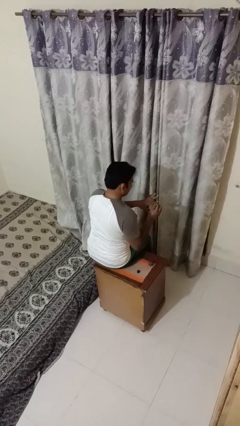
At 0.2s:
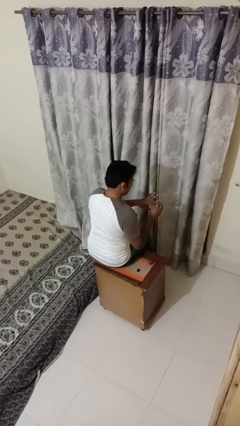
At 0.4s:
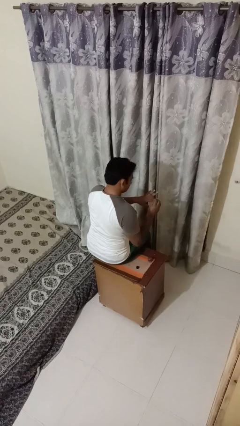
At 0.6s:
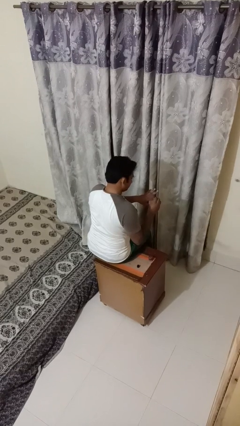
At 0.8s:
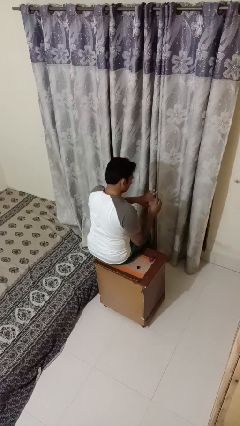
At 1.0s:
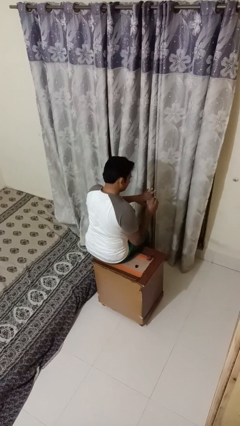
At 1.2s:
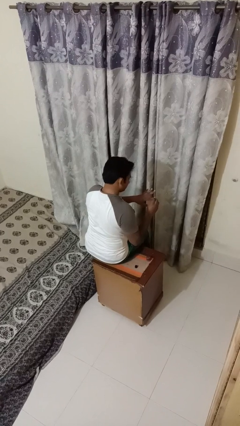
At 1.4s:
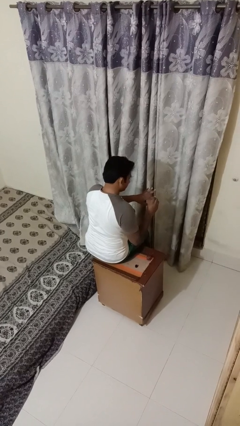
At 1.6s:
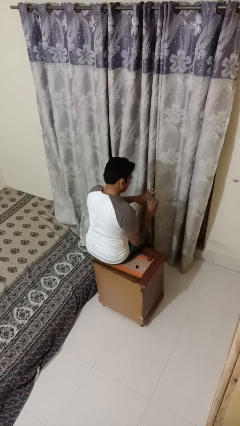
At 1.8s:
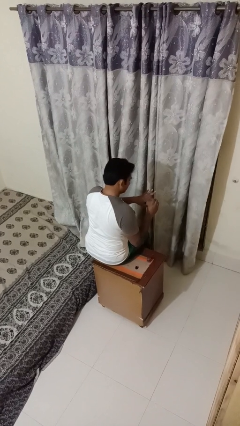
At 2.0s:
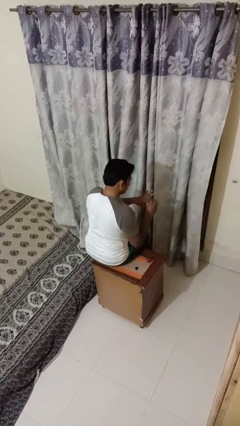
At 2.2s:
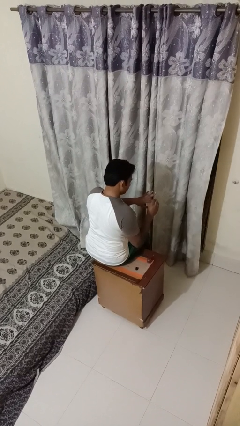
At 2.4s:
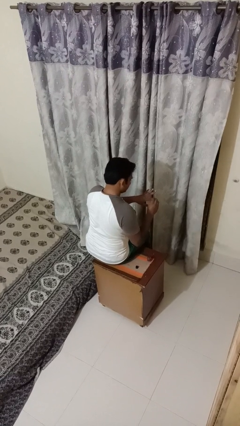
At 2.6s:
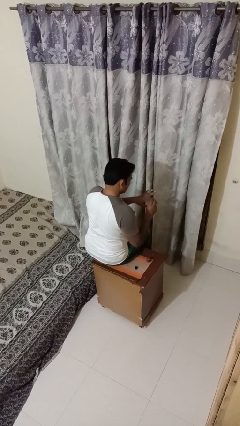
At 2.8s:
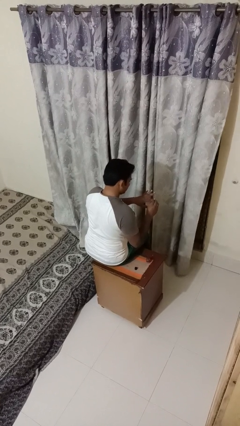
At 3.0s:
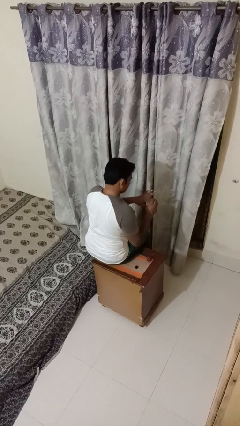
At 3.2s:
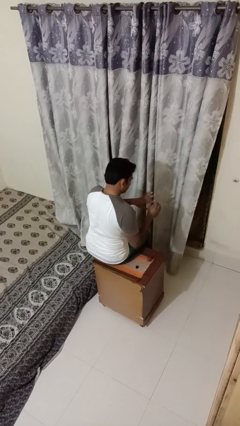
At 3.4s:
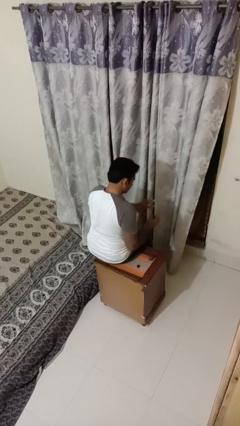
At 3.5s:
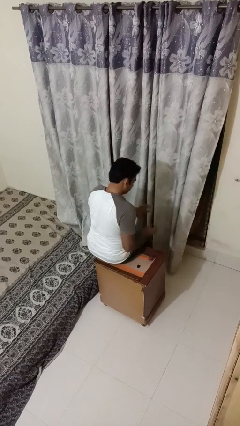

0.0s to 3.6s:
person paints fingernails

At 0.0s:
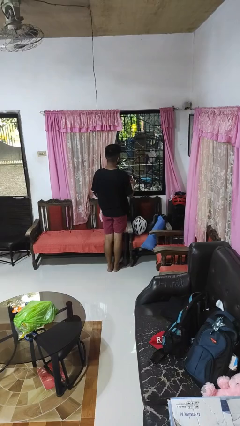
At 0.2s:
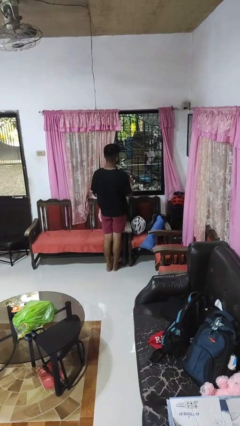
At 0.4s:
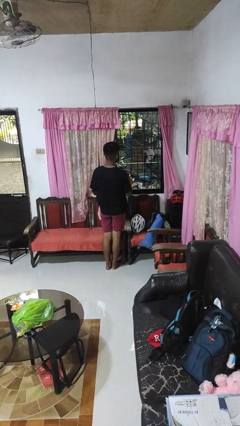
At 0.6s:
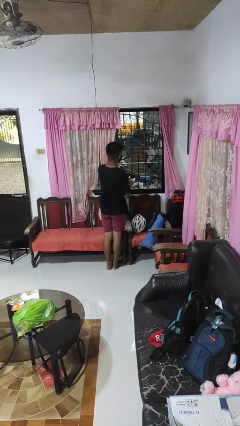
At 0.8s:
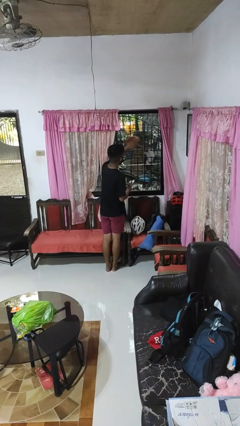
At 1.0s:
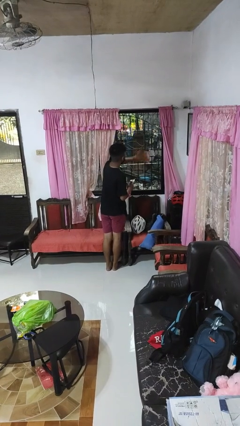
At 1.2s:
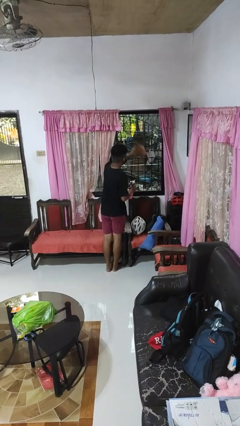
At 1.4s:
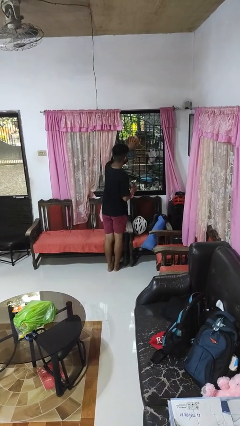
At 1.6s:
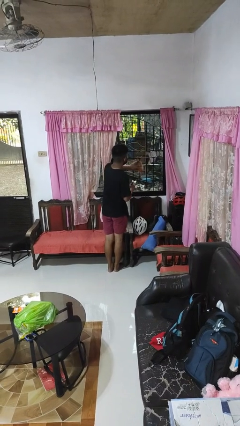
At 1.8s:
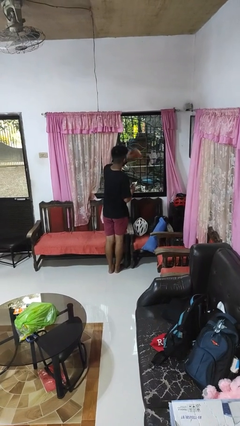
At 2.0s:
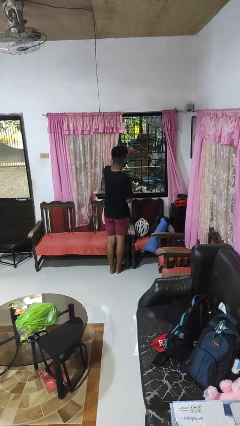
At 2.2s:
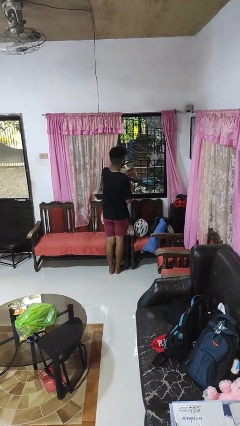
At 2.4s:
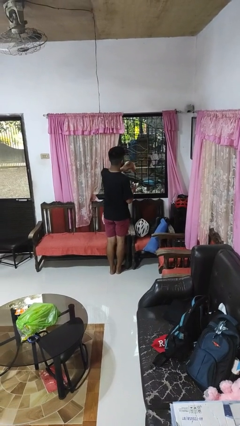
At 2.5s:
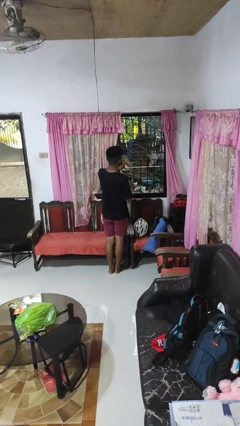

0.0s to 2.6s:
person washes window

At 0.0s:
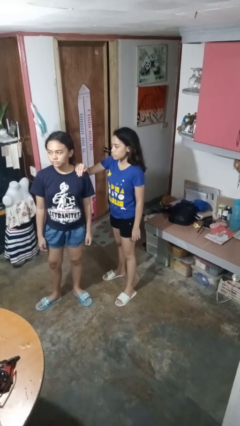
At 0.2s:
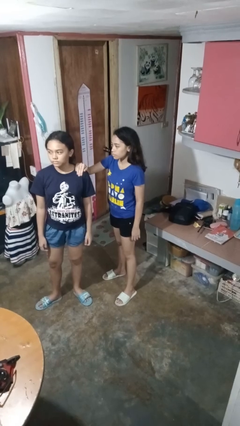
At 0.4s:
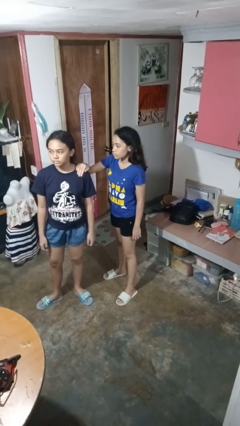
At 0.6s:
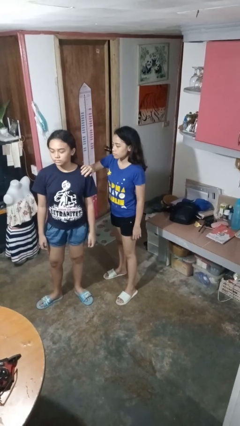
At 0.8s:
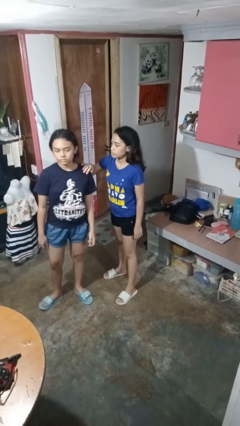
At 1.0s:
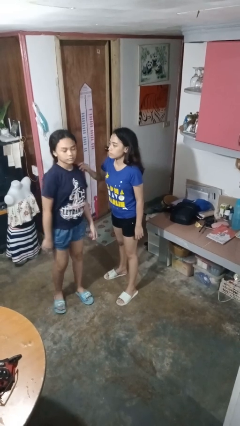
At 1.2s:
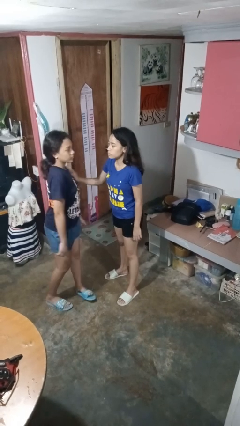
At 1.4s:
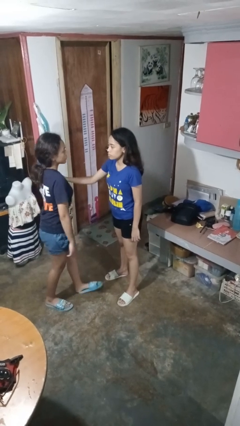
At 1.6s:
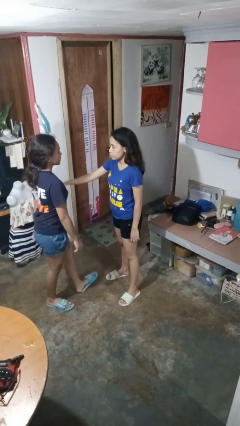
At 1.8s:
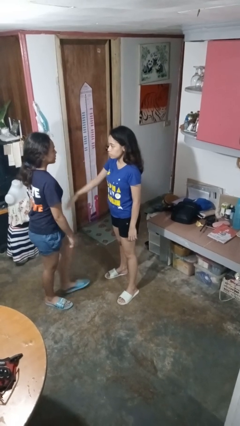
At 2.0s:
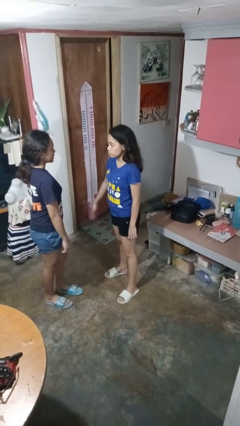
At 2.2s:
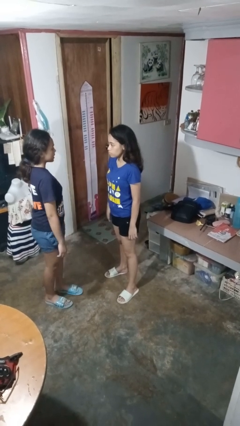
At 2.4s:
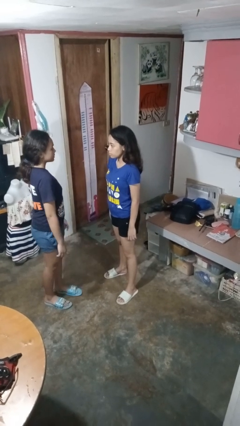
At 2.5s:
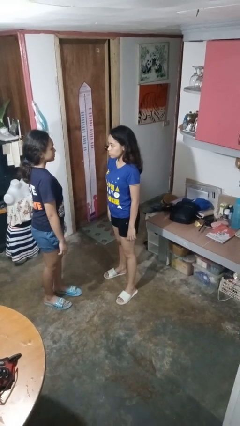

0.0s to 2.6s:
person spins person around

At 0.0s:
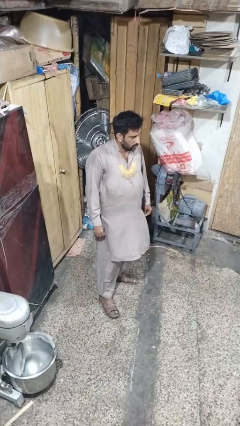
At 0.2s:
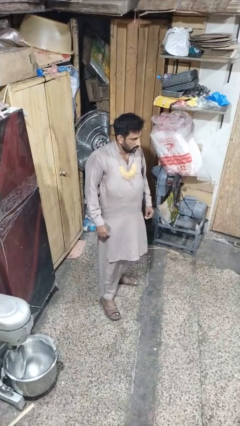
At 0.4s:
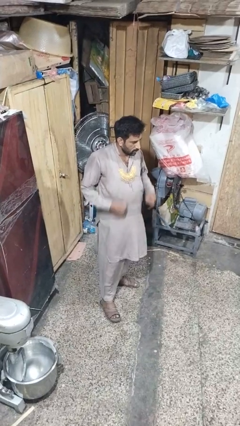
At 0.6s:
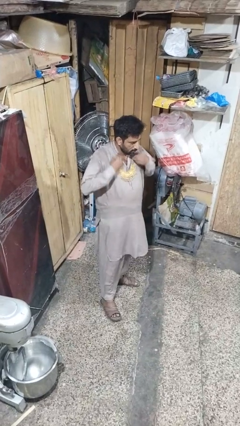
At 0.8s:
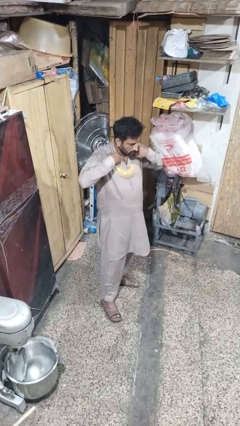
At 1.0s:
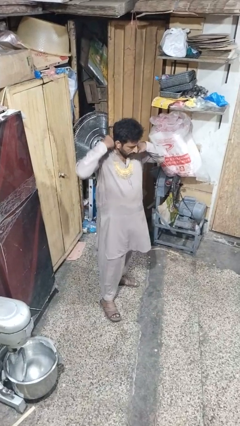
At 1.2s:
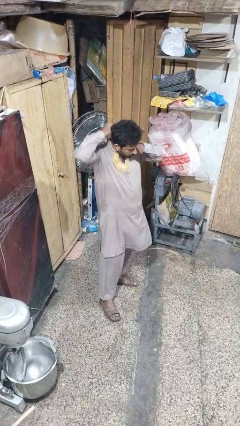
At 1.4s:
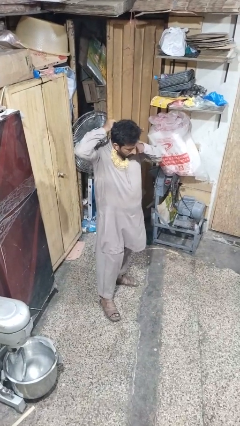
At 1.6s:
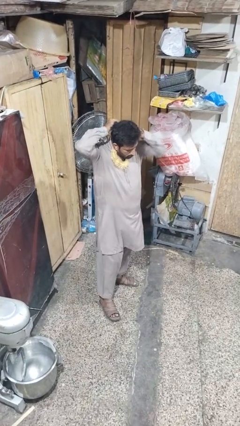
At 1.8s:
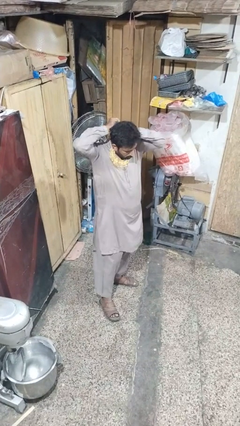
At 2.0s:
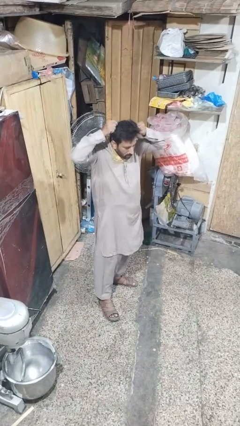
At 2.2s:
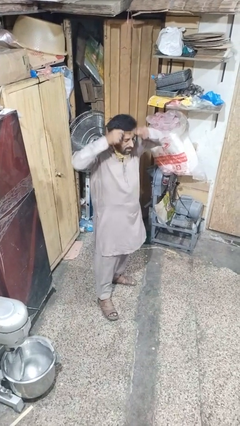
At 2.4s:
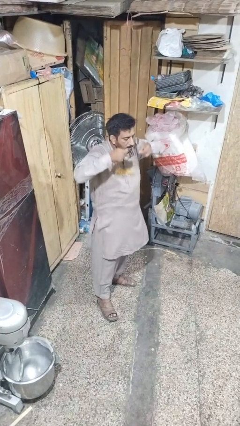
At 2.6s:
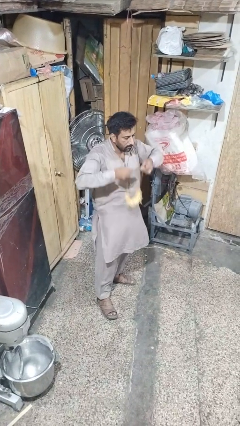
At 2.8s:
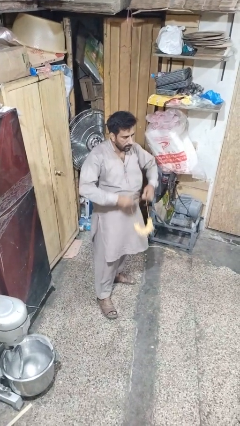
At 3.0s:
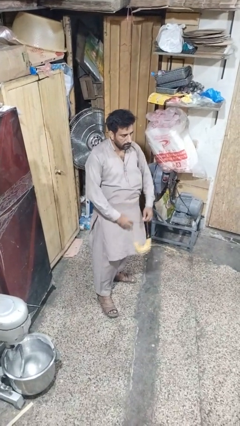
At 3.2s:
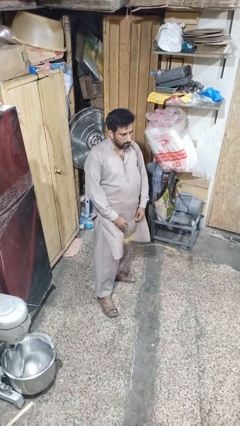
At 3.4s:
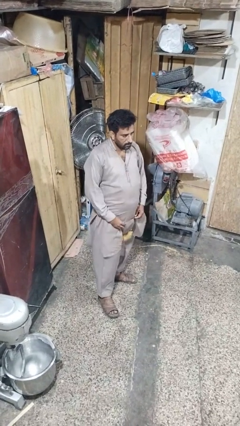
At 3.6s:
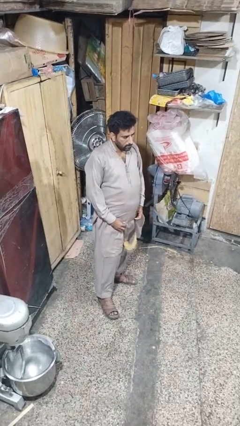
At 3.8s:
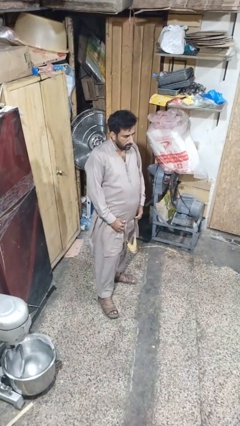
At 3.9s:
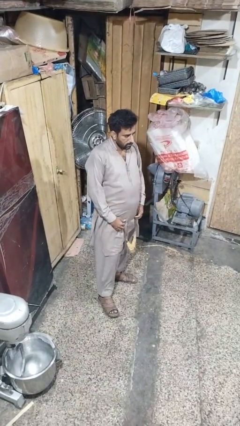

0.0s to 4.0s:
person takes off necklace

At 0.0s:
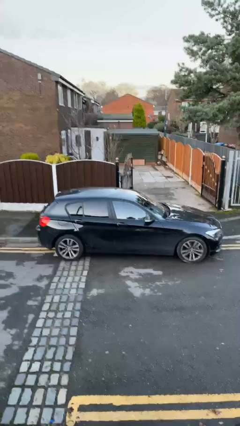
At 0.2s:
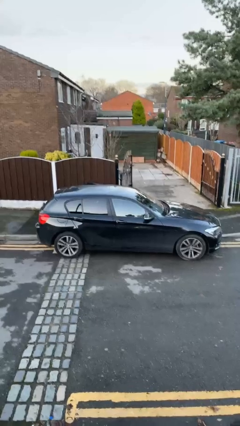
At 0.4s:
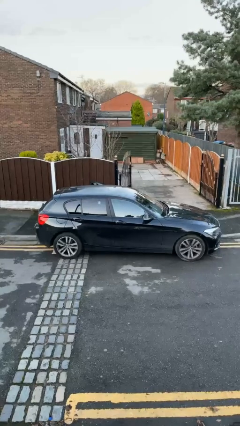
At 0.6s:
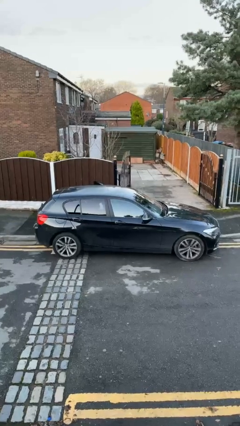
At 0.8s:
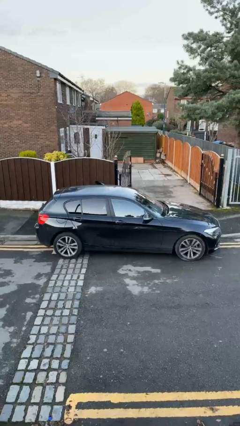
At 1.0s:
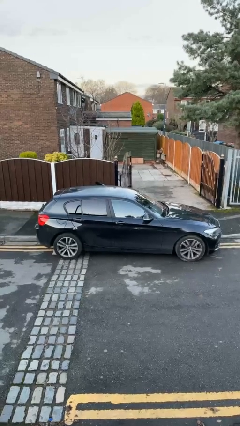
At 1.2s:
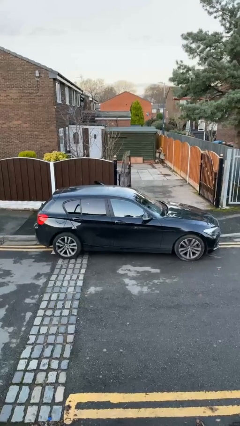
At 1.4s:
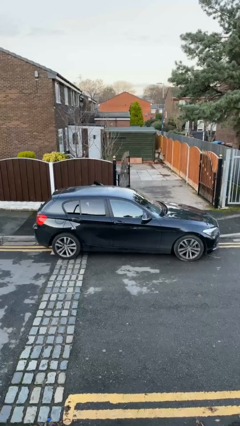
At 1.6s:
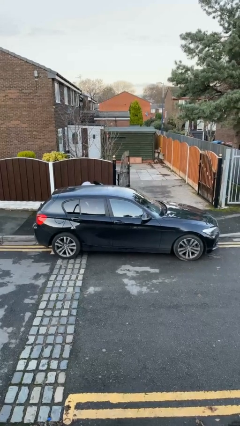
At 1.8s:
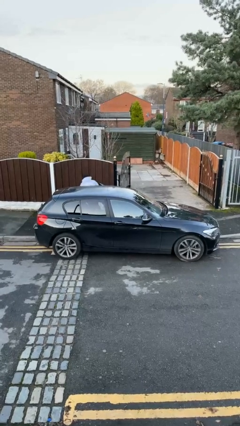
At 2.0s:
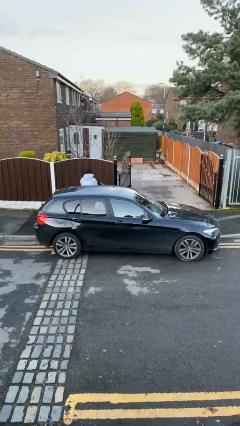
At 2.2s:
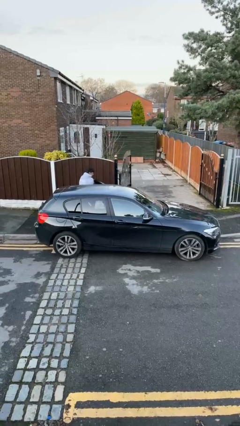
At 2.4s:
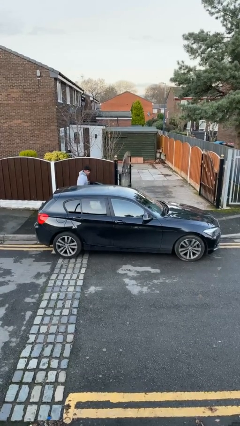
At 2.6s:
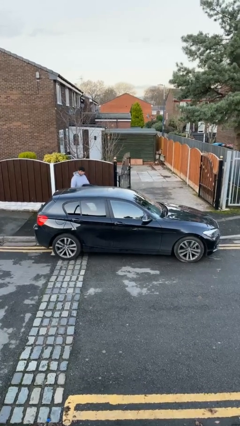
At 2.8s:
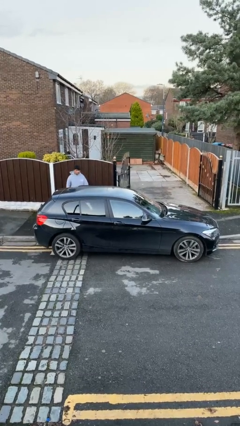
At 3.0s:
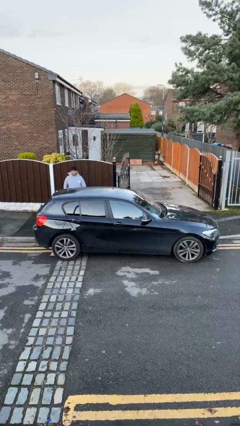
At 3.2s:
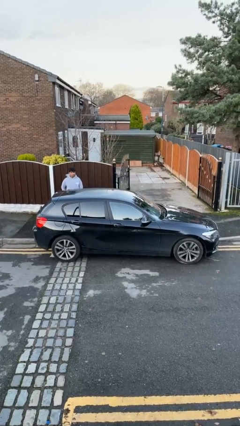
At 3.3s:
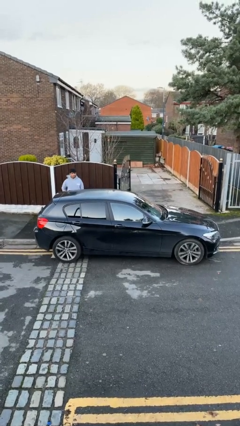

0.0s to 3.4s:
car drops off person

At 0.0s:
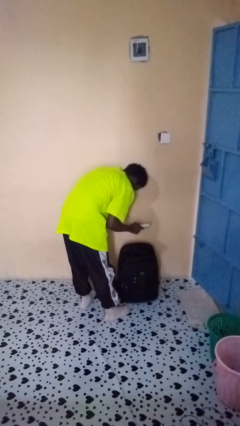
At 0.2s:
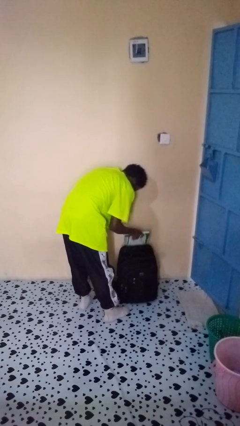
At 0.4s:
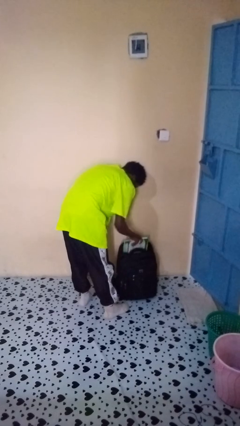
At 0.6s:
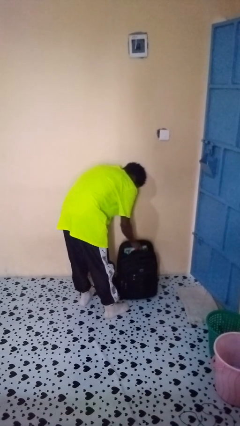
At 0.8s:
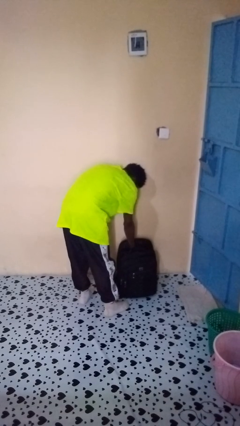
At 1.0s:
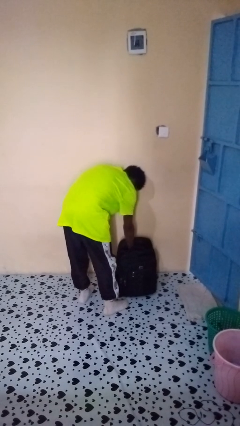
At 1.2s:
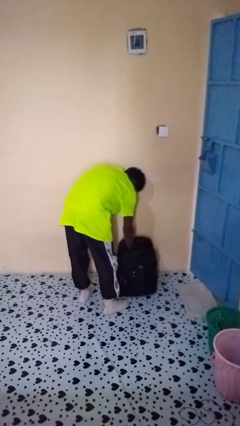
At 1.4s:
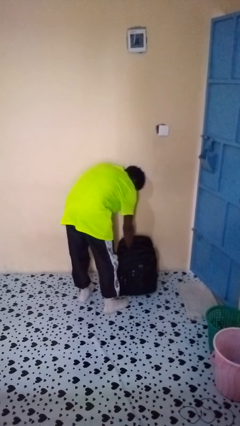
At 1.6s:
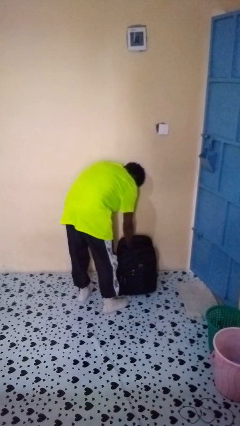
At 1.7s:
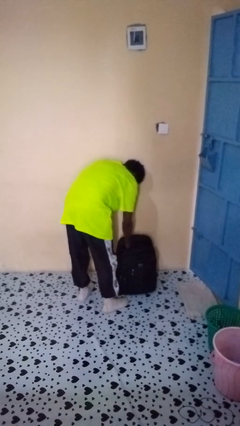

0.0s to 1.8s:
person puts object into backpack
